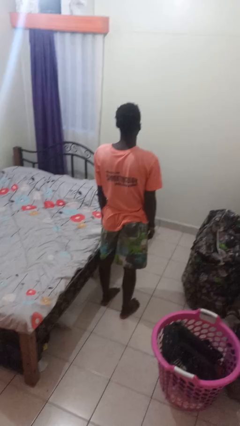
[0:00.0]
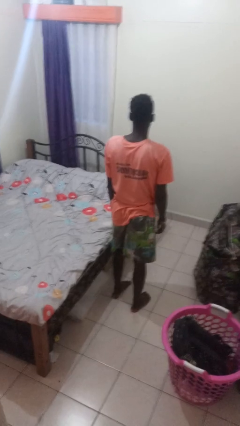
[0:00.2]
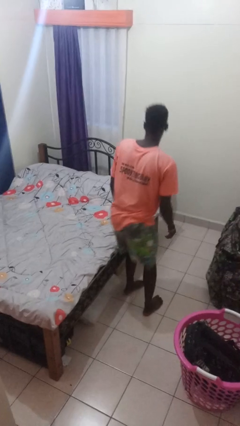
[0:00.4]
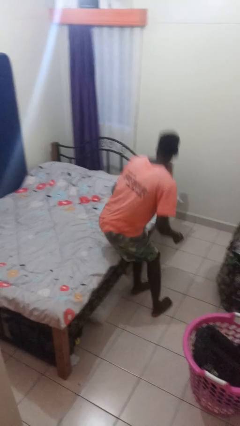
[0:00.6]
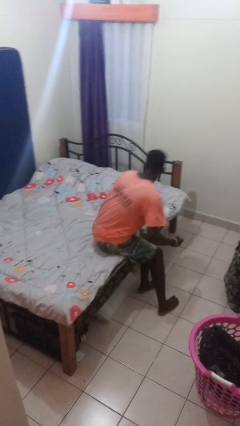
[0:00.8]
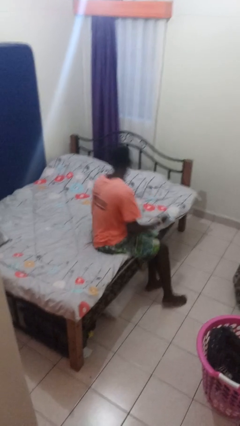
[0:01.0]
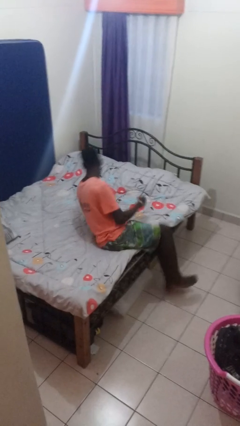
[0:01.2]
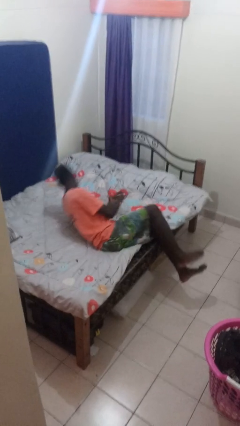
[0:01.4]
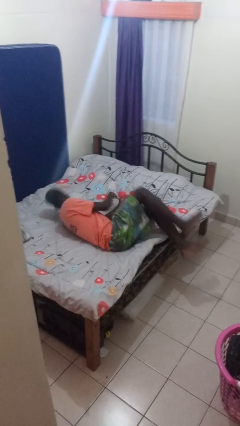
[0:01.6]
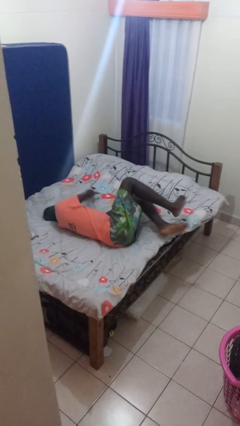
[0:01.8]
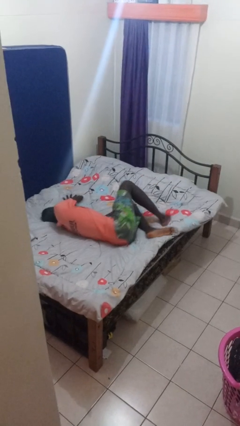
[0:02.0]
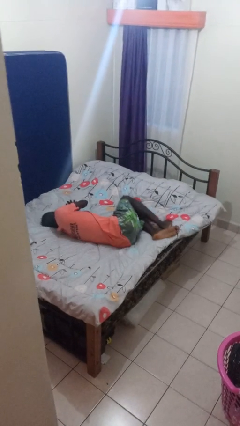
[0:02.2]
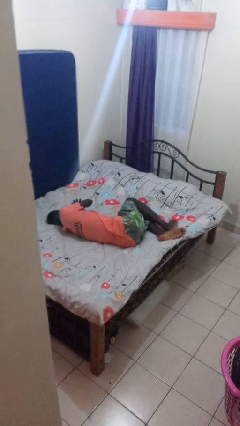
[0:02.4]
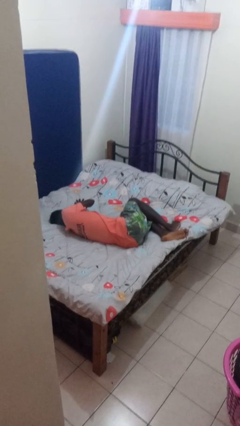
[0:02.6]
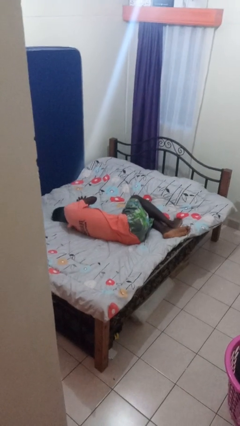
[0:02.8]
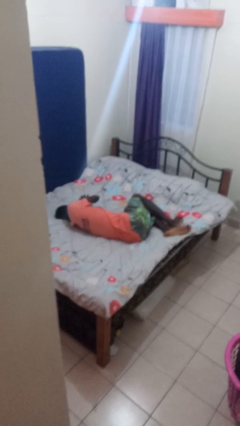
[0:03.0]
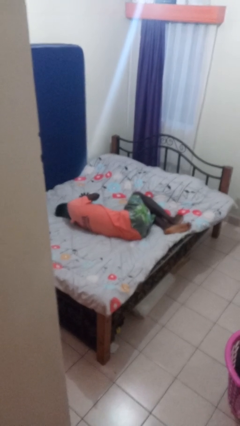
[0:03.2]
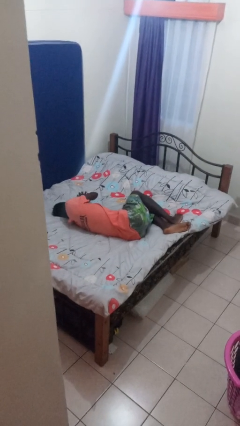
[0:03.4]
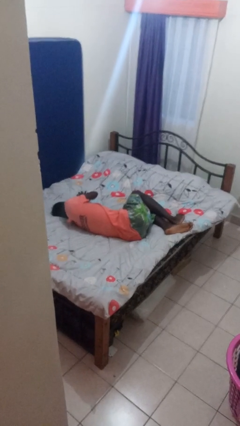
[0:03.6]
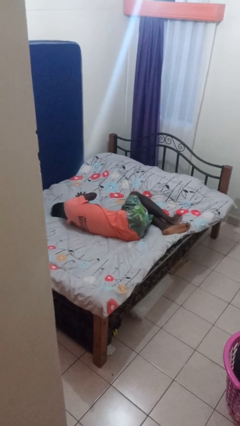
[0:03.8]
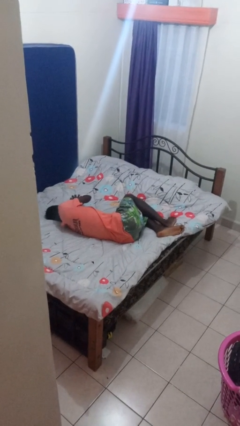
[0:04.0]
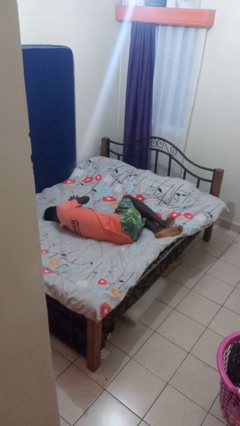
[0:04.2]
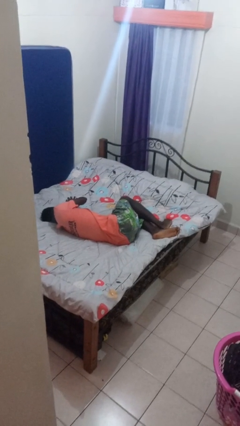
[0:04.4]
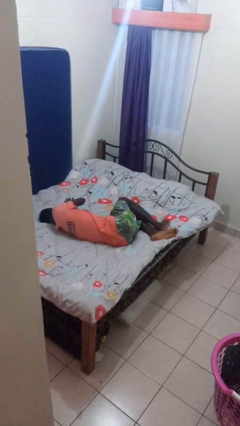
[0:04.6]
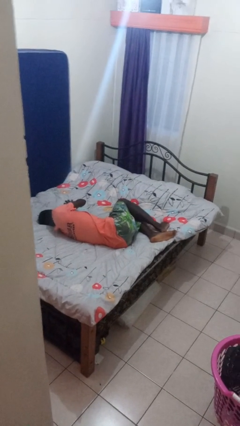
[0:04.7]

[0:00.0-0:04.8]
person lies down on bed

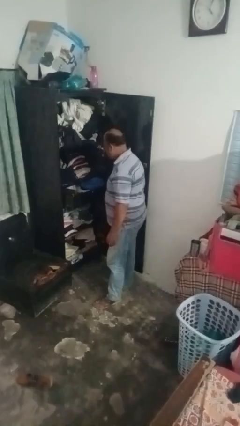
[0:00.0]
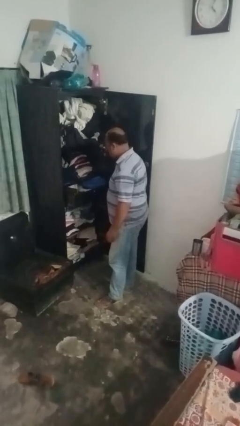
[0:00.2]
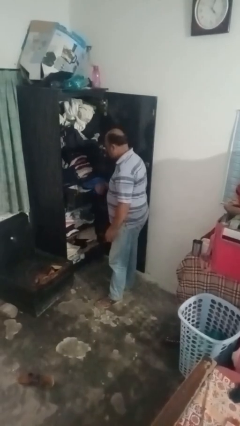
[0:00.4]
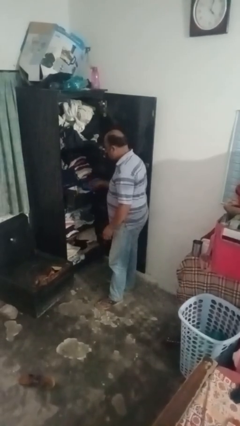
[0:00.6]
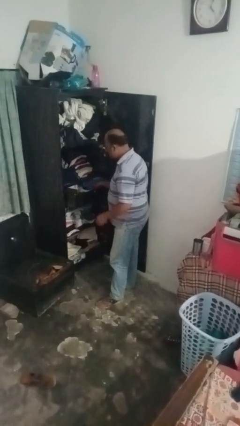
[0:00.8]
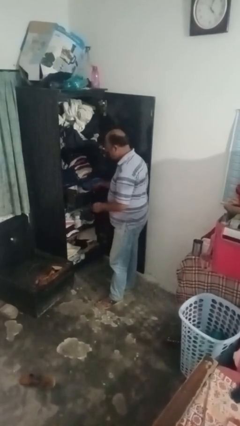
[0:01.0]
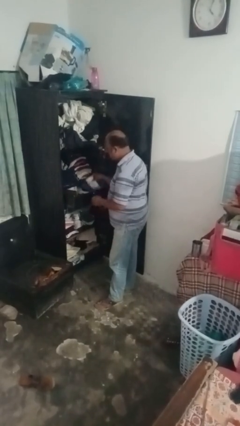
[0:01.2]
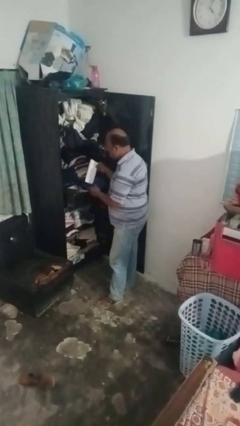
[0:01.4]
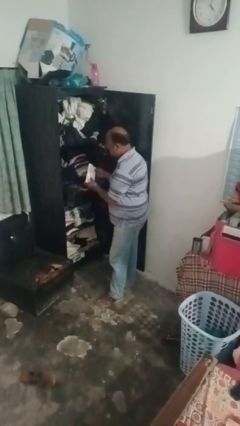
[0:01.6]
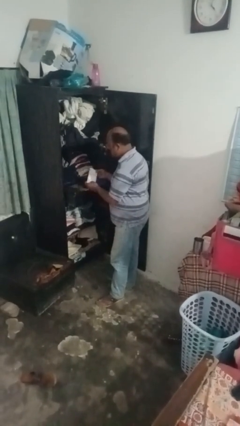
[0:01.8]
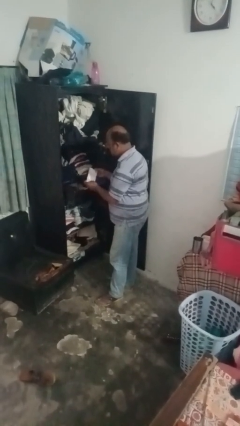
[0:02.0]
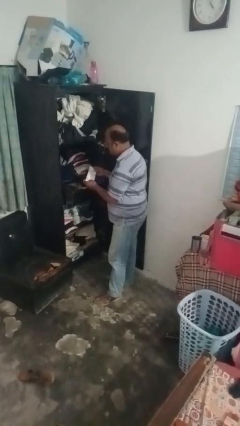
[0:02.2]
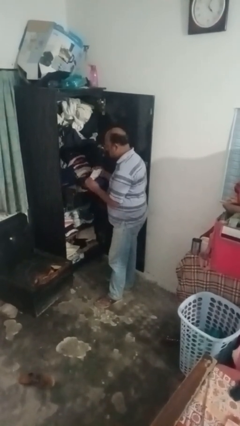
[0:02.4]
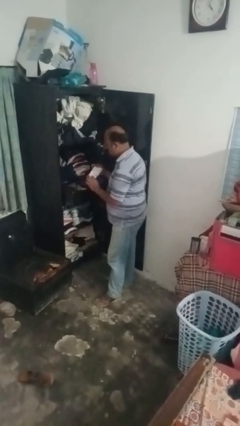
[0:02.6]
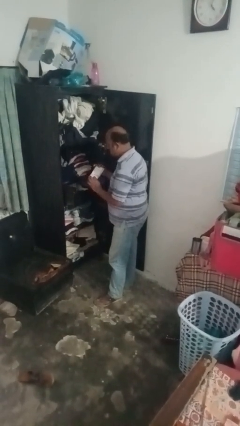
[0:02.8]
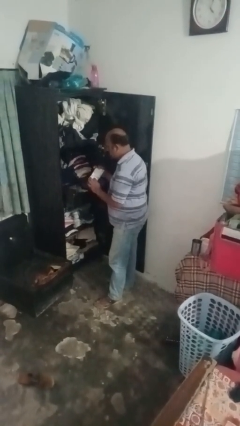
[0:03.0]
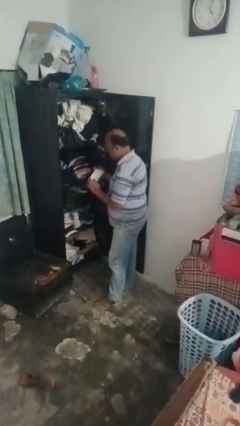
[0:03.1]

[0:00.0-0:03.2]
person puts clothes into dresser

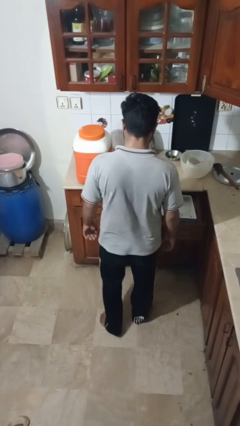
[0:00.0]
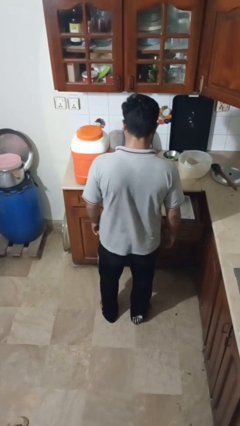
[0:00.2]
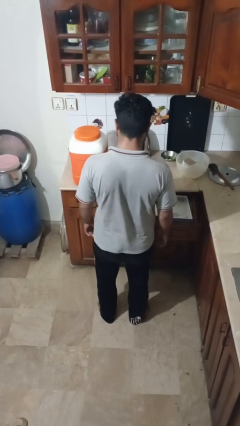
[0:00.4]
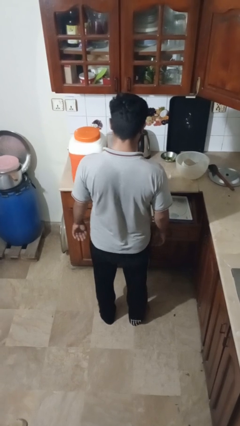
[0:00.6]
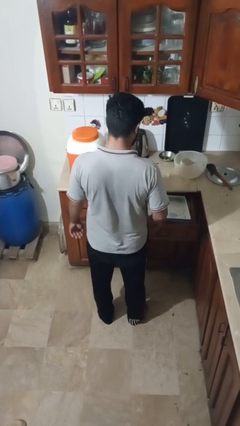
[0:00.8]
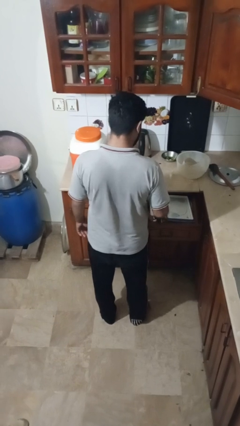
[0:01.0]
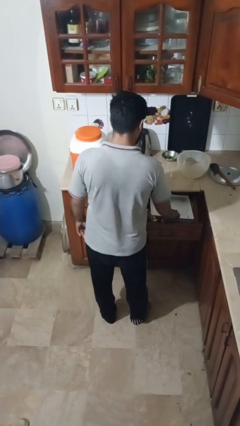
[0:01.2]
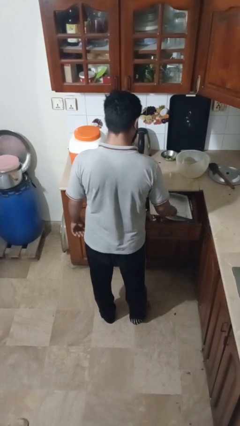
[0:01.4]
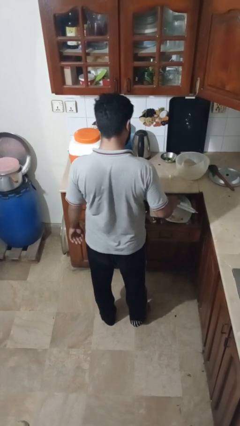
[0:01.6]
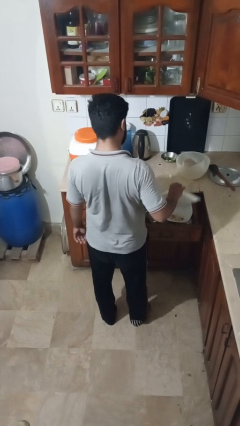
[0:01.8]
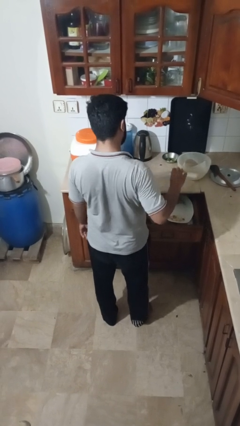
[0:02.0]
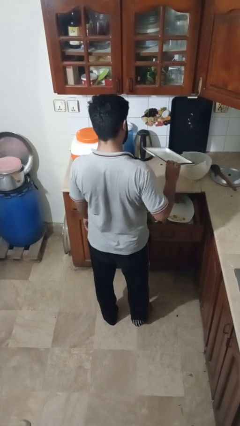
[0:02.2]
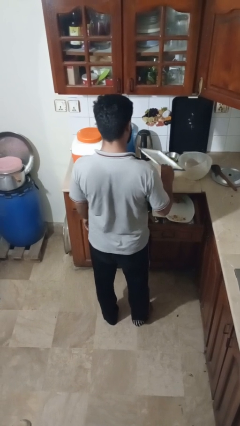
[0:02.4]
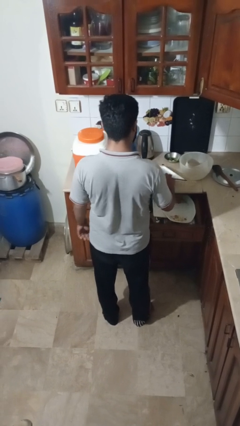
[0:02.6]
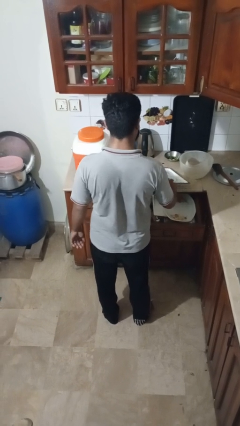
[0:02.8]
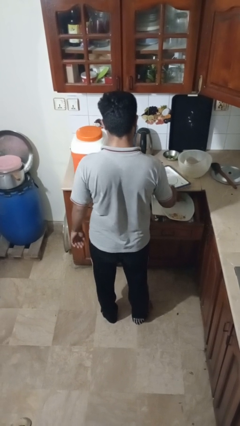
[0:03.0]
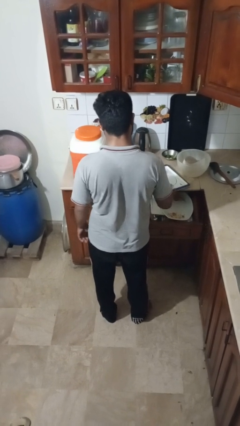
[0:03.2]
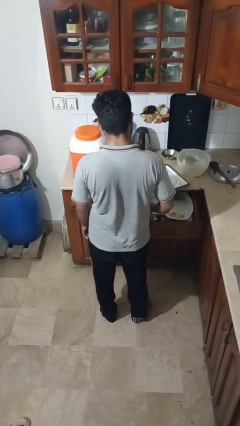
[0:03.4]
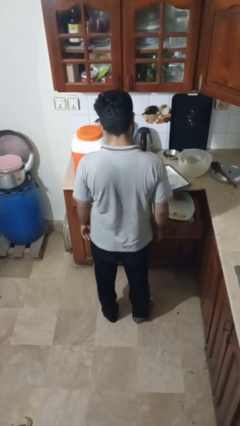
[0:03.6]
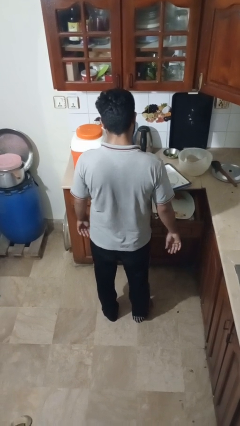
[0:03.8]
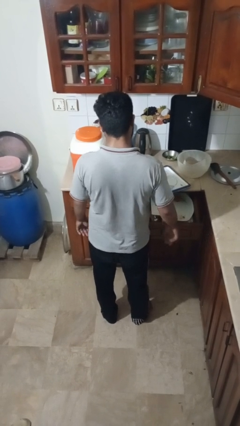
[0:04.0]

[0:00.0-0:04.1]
person takes object from kitchen drawer

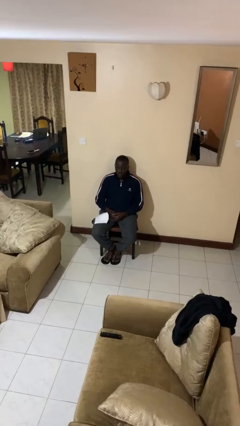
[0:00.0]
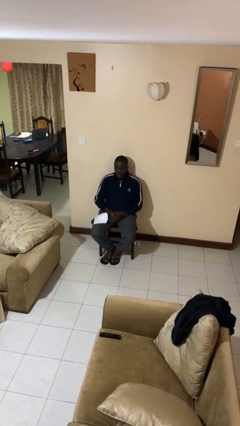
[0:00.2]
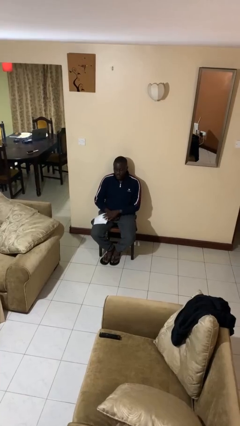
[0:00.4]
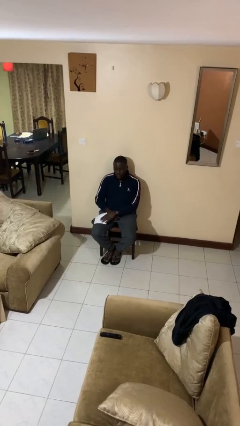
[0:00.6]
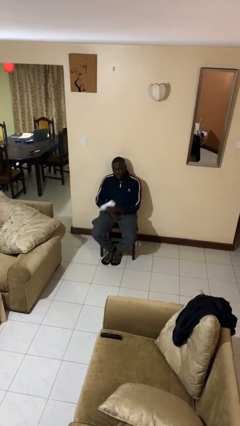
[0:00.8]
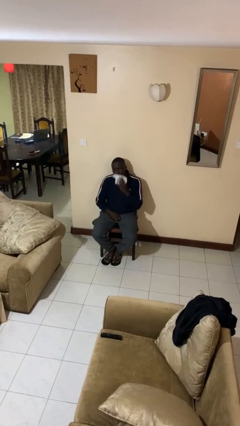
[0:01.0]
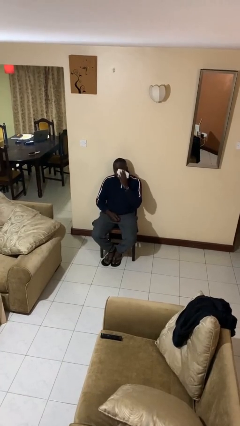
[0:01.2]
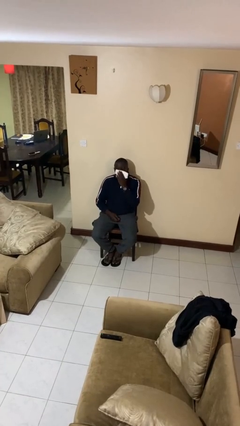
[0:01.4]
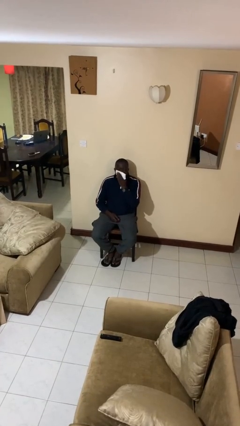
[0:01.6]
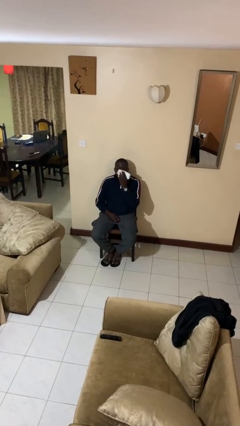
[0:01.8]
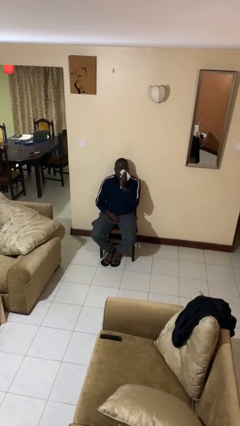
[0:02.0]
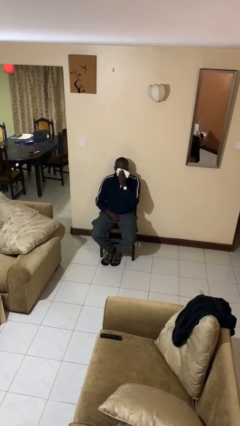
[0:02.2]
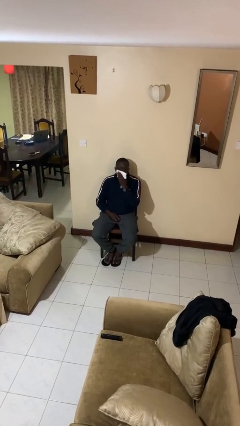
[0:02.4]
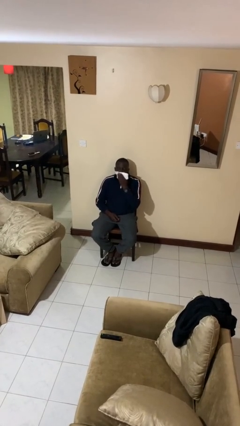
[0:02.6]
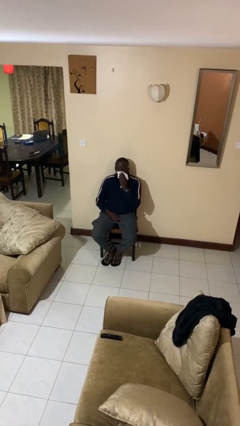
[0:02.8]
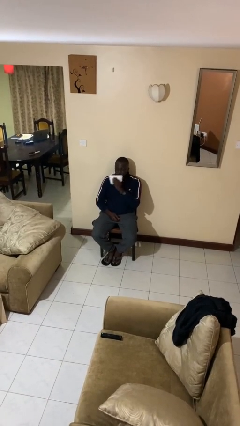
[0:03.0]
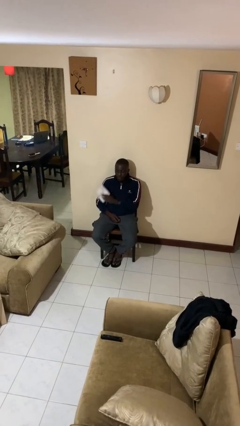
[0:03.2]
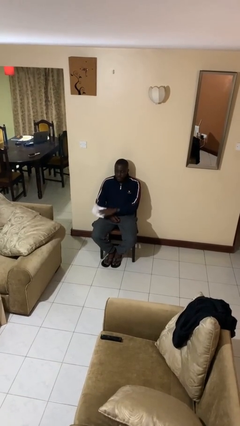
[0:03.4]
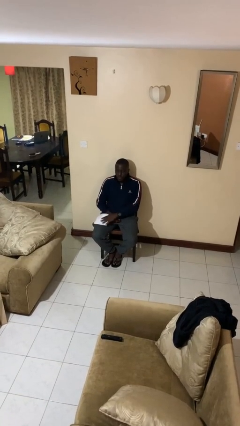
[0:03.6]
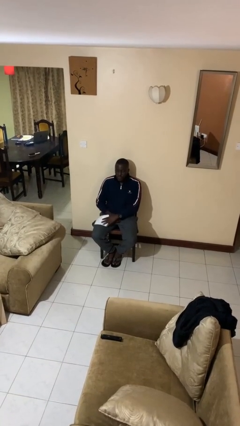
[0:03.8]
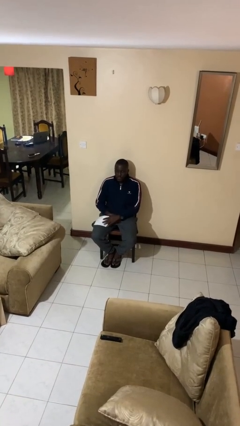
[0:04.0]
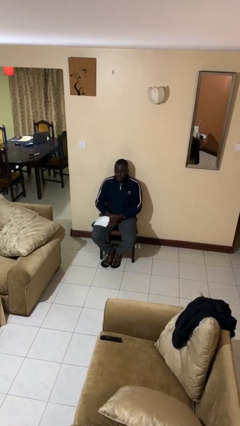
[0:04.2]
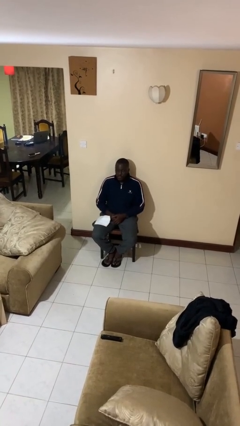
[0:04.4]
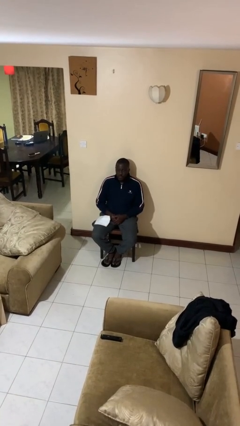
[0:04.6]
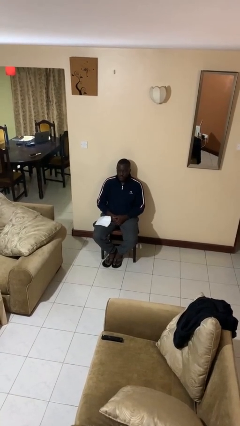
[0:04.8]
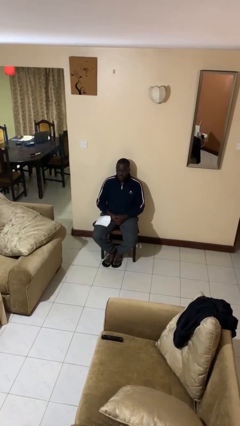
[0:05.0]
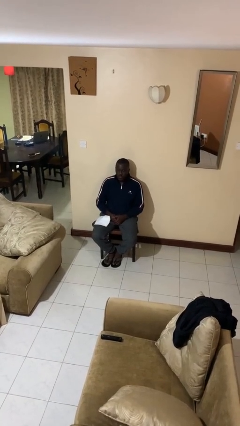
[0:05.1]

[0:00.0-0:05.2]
person wipes mouth with napkin

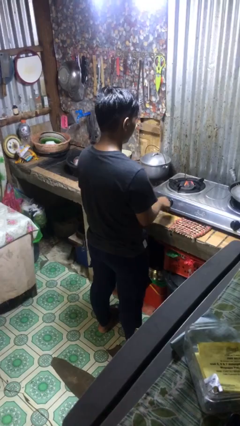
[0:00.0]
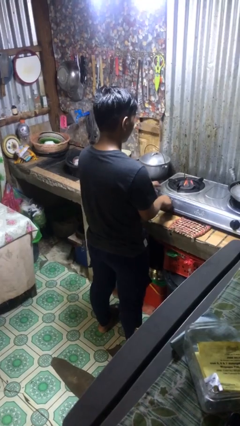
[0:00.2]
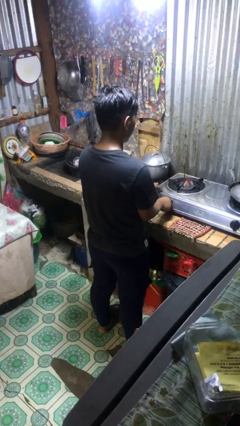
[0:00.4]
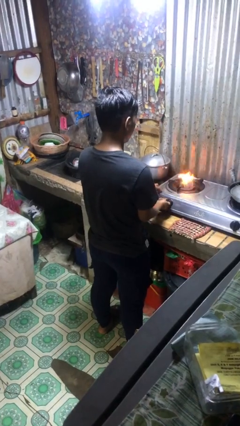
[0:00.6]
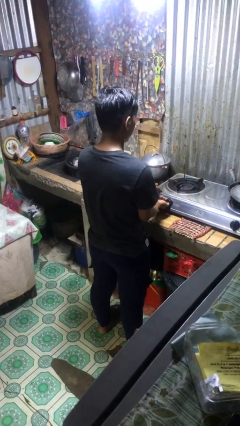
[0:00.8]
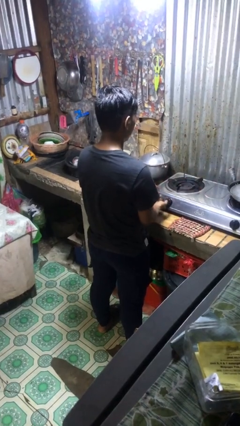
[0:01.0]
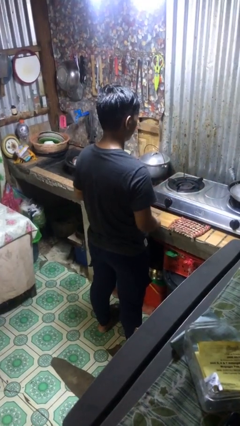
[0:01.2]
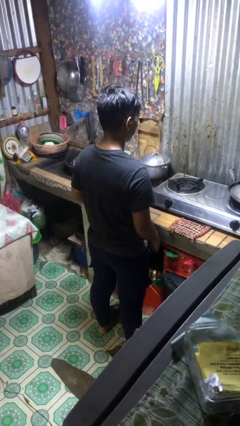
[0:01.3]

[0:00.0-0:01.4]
person turns off stovetop
